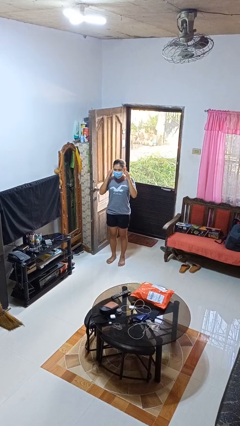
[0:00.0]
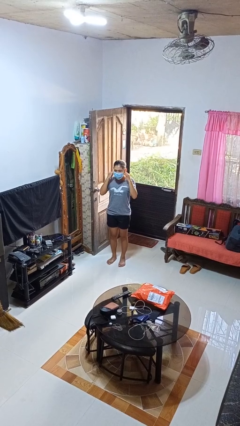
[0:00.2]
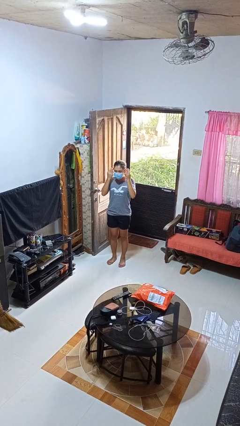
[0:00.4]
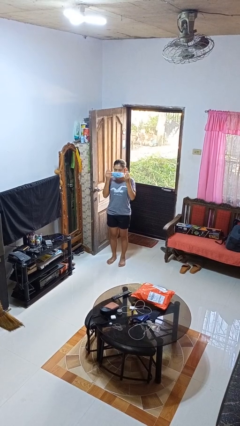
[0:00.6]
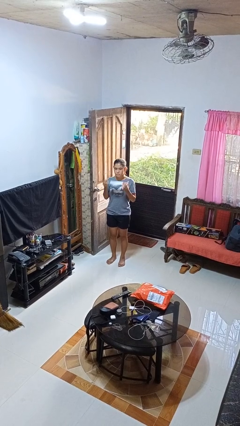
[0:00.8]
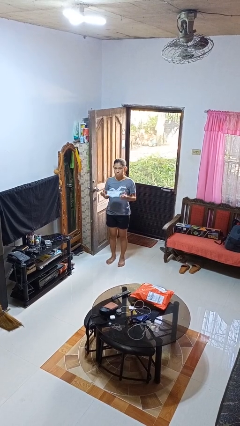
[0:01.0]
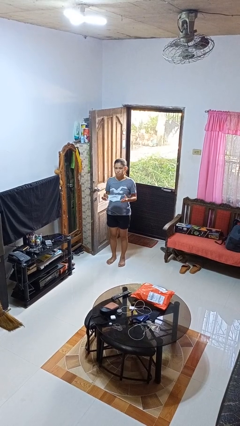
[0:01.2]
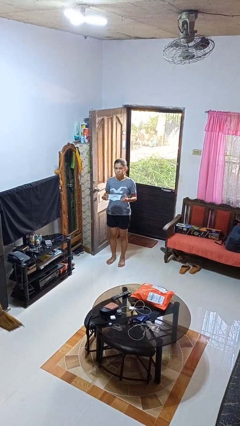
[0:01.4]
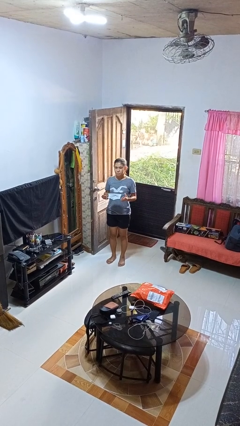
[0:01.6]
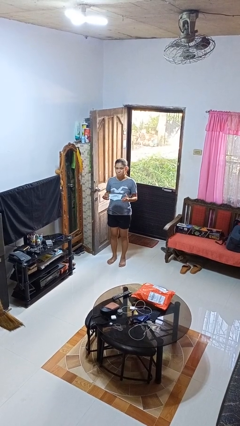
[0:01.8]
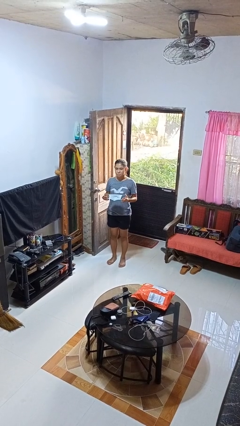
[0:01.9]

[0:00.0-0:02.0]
person takes off facemask

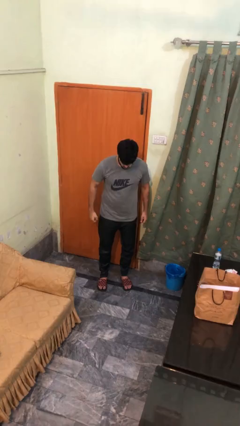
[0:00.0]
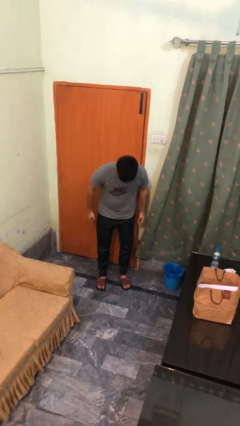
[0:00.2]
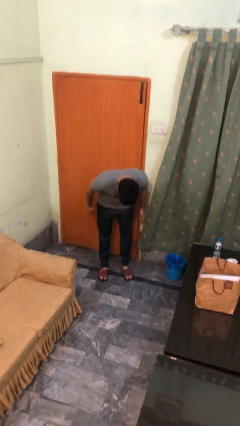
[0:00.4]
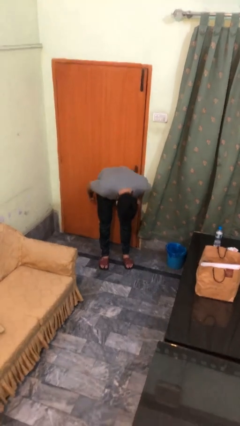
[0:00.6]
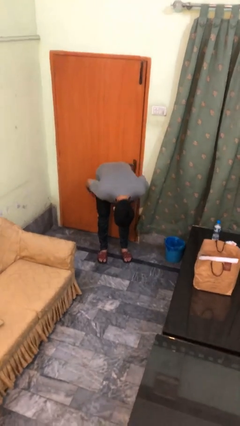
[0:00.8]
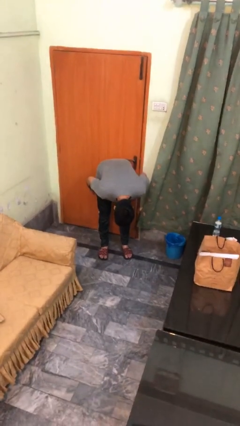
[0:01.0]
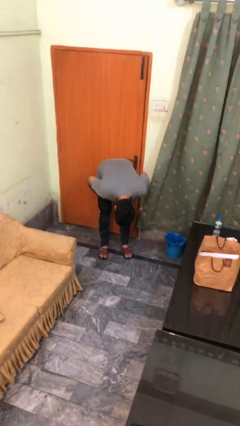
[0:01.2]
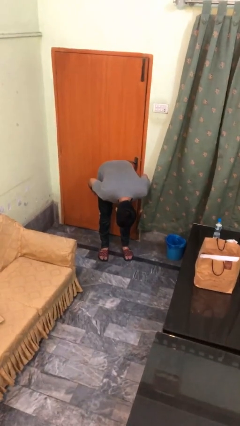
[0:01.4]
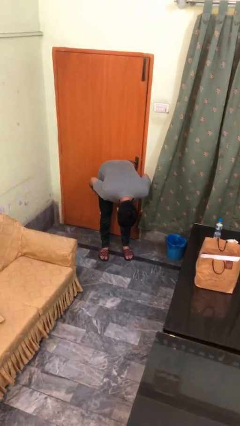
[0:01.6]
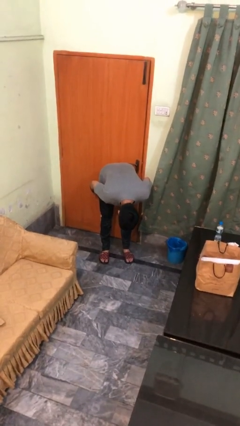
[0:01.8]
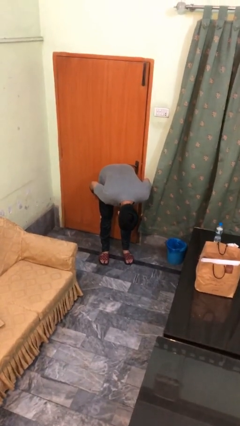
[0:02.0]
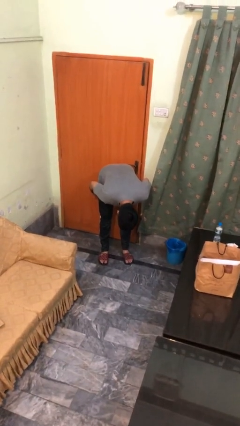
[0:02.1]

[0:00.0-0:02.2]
person bows

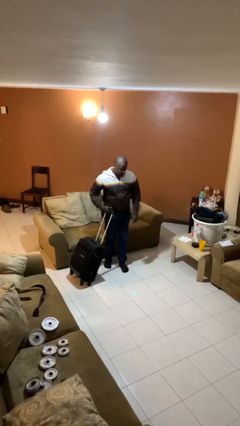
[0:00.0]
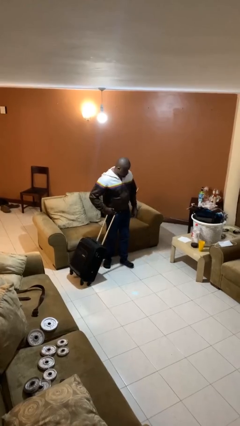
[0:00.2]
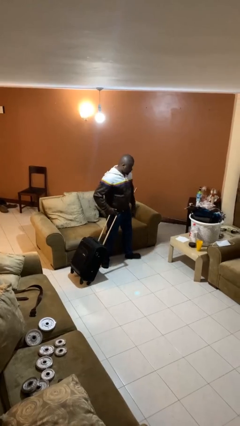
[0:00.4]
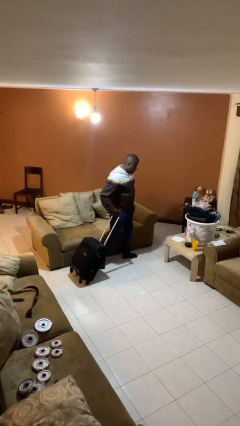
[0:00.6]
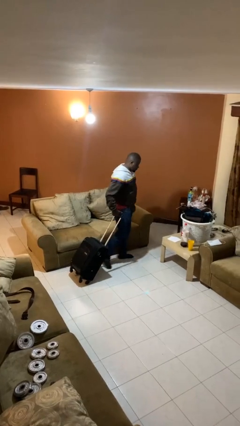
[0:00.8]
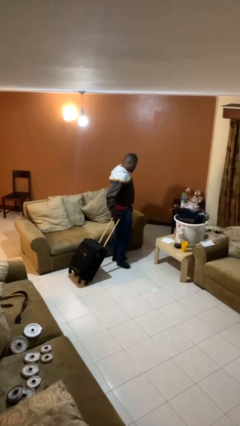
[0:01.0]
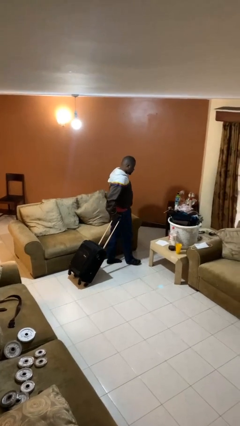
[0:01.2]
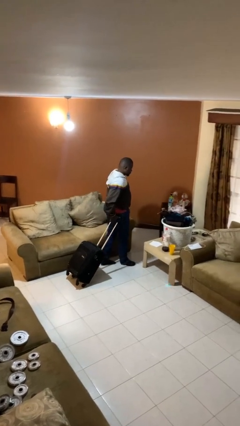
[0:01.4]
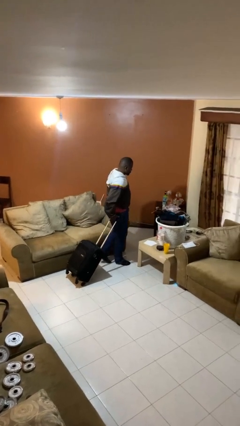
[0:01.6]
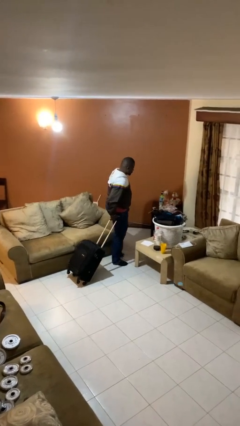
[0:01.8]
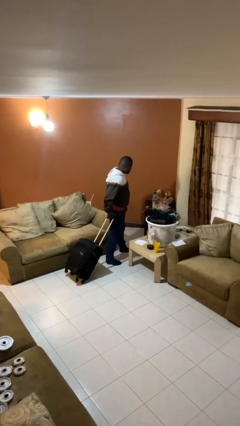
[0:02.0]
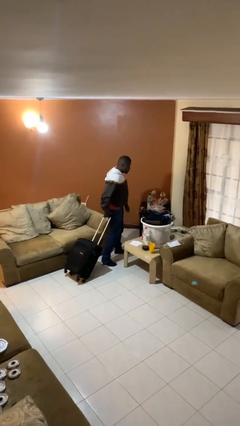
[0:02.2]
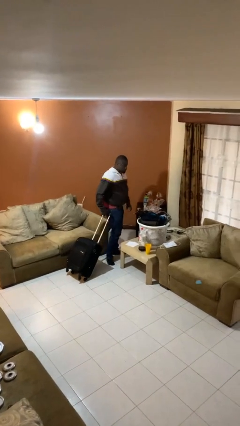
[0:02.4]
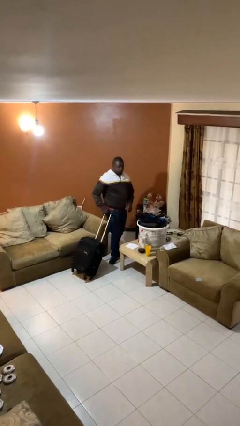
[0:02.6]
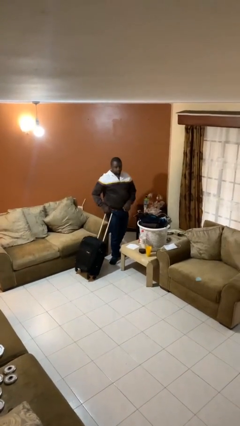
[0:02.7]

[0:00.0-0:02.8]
person pulls wheeled cart

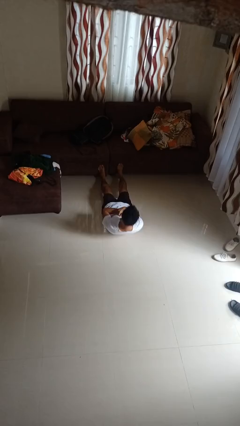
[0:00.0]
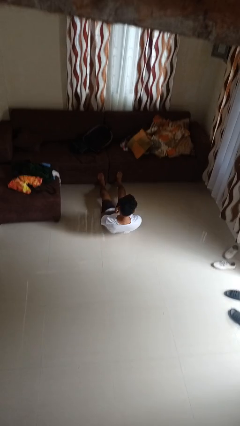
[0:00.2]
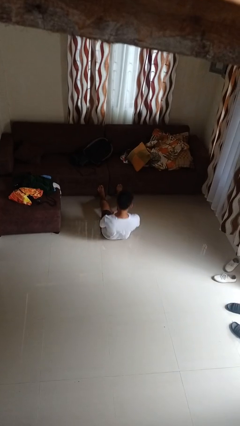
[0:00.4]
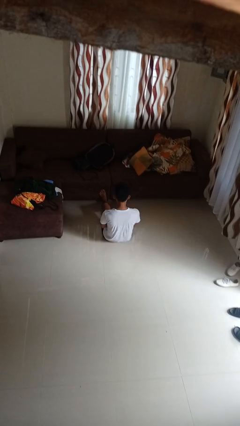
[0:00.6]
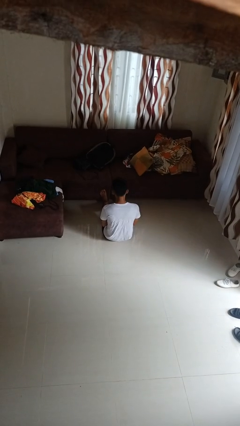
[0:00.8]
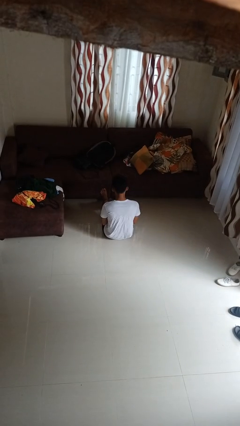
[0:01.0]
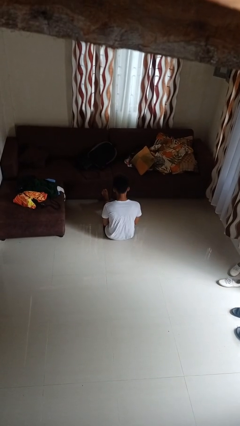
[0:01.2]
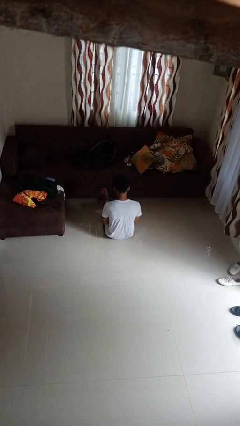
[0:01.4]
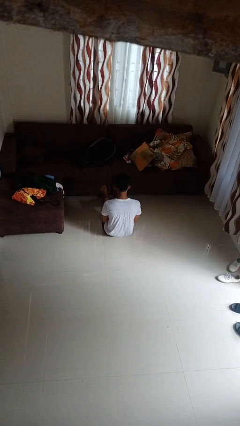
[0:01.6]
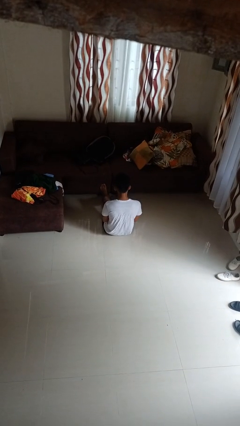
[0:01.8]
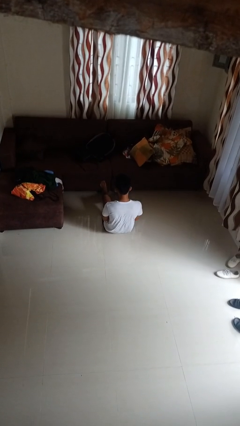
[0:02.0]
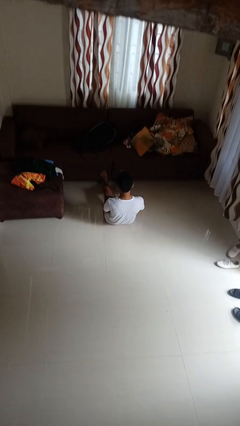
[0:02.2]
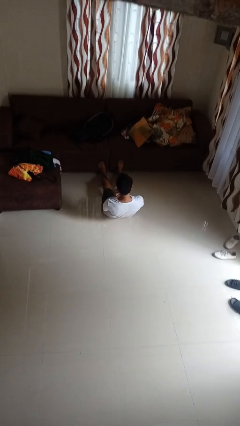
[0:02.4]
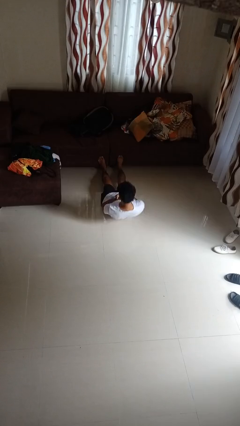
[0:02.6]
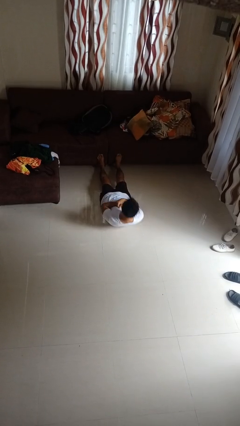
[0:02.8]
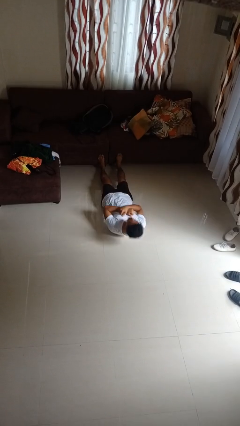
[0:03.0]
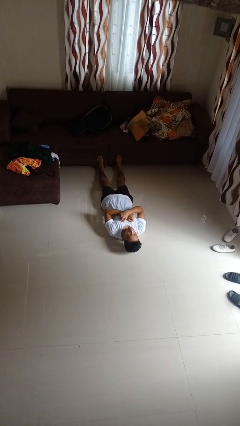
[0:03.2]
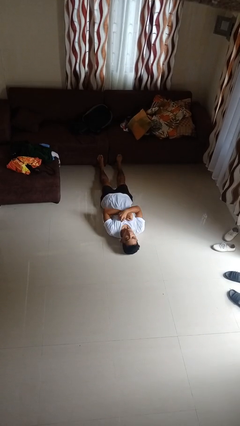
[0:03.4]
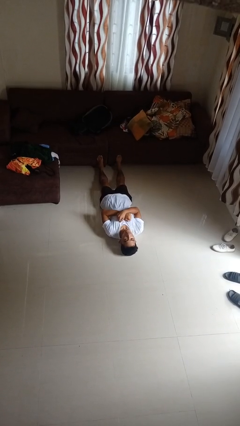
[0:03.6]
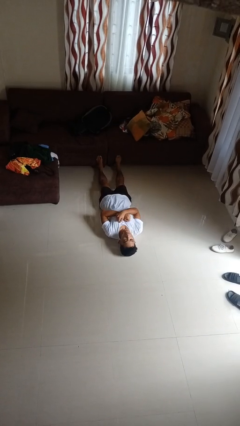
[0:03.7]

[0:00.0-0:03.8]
person exercises with situp

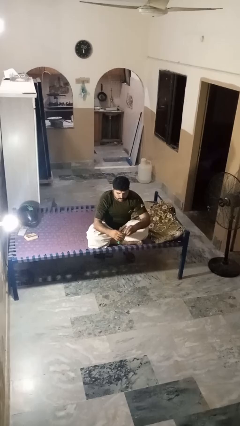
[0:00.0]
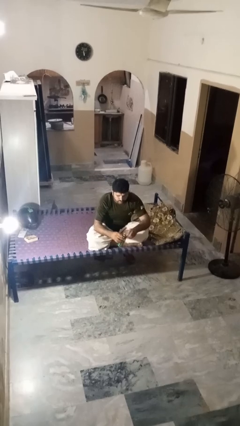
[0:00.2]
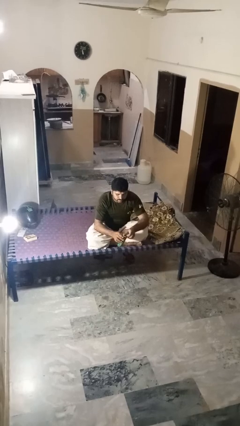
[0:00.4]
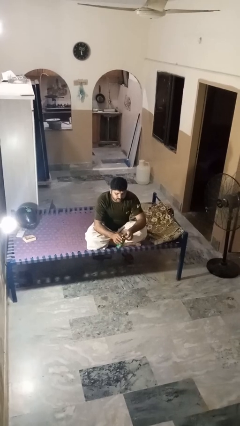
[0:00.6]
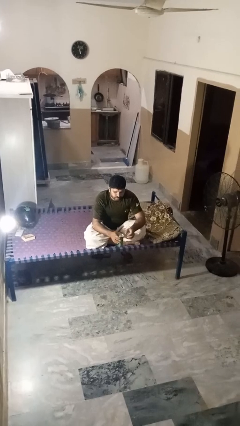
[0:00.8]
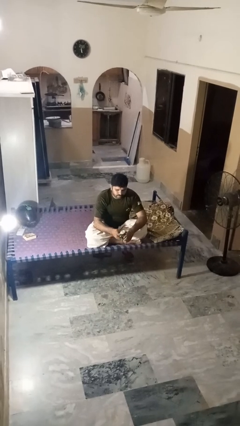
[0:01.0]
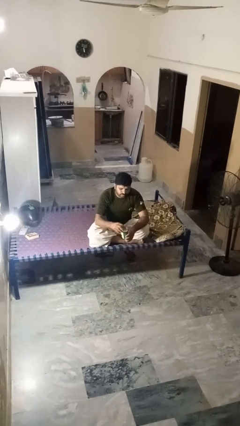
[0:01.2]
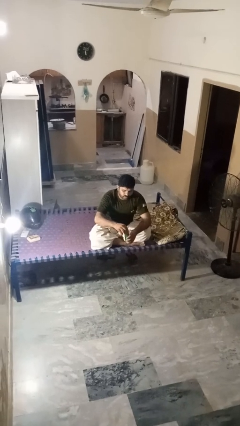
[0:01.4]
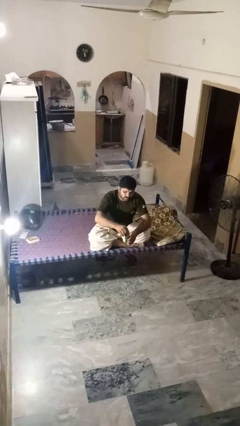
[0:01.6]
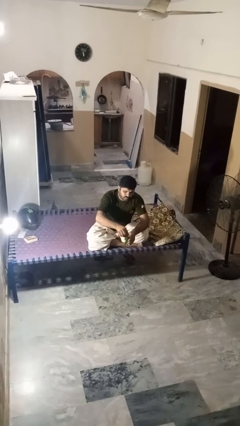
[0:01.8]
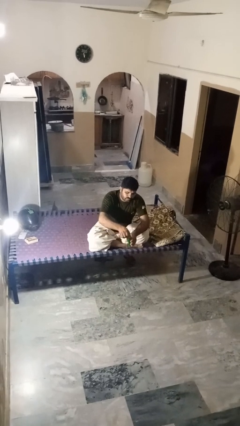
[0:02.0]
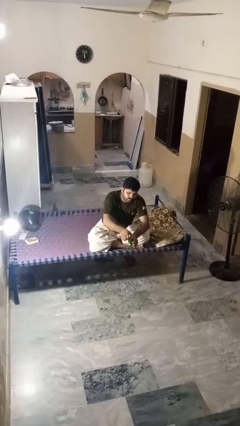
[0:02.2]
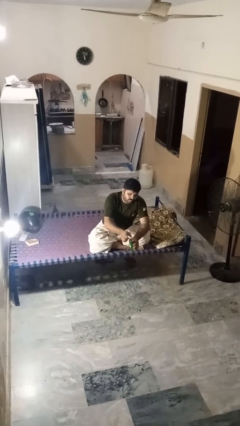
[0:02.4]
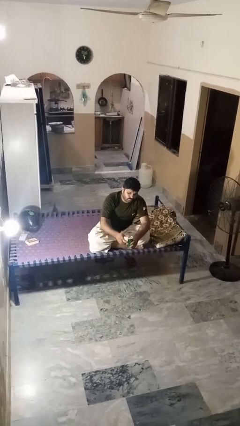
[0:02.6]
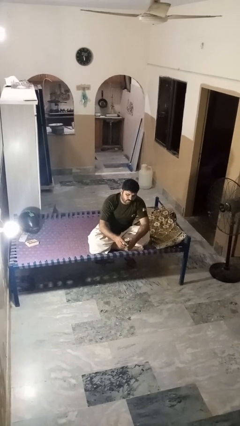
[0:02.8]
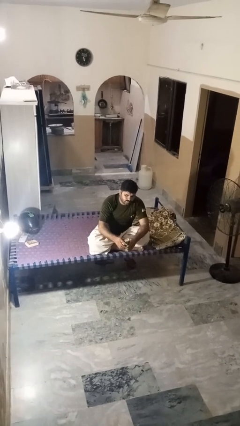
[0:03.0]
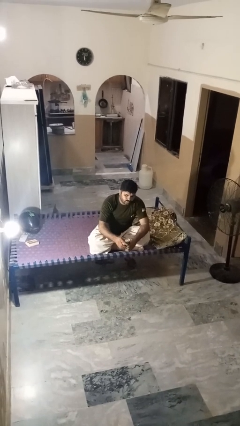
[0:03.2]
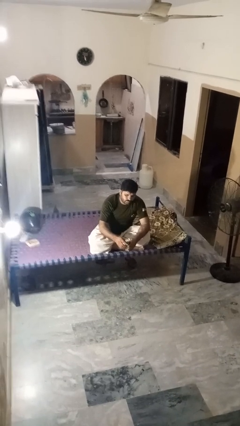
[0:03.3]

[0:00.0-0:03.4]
person opens beverage can

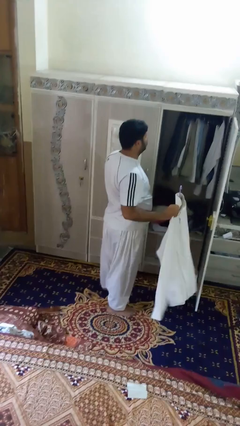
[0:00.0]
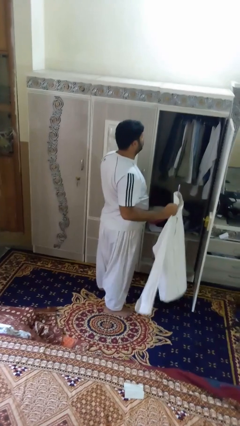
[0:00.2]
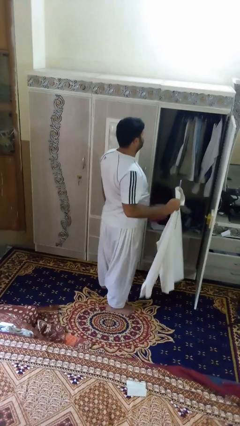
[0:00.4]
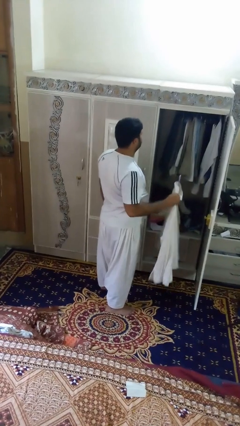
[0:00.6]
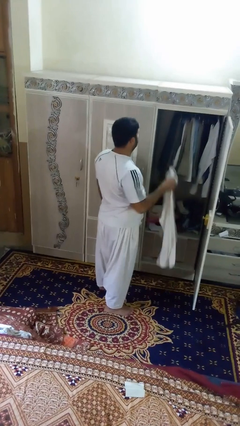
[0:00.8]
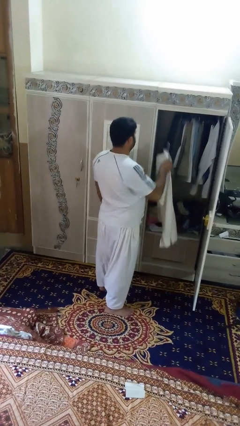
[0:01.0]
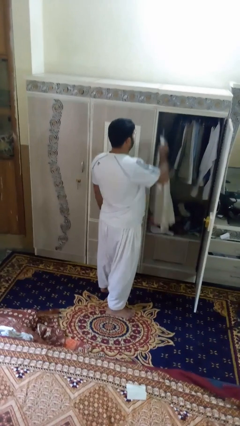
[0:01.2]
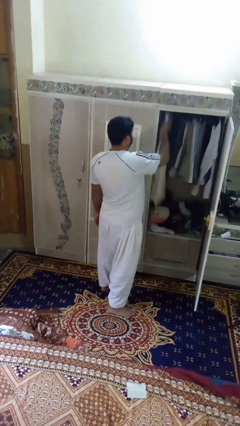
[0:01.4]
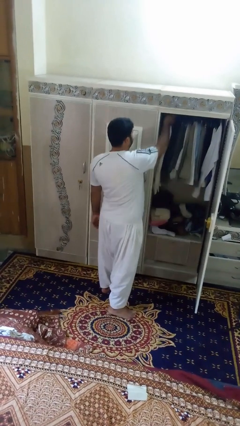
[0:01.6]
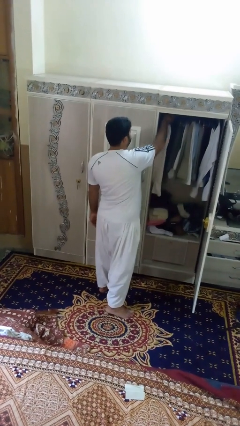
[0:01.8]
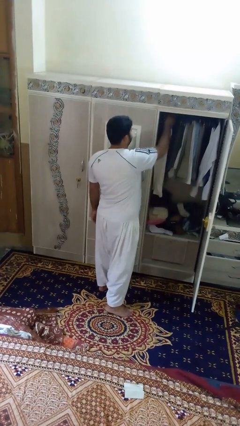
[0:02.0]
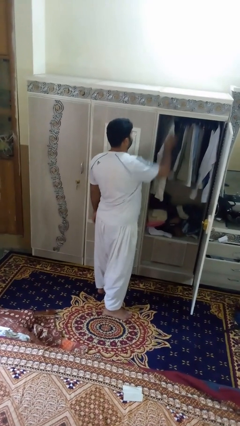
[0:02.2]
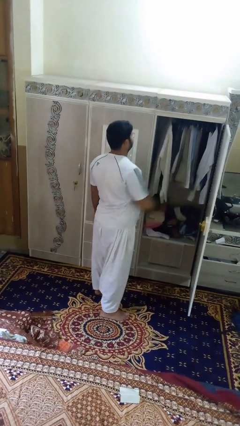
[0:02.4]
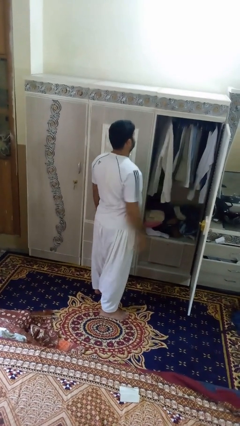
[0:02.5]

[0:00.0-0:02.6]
person puts clothes into closet
